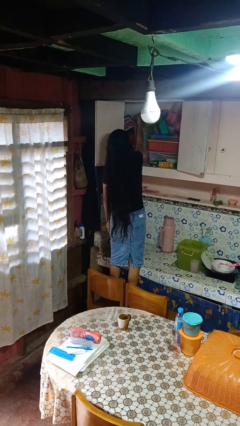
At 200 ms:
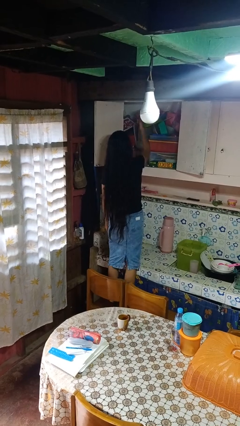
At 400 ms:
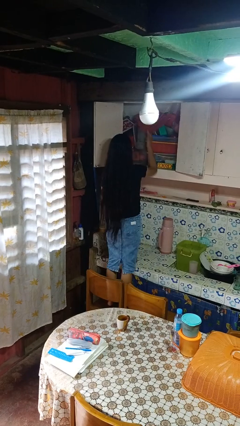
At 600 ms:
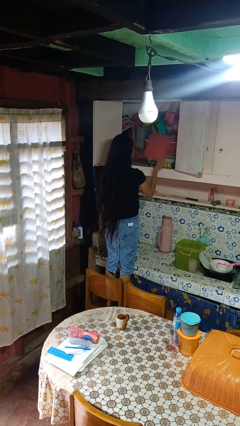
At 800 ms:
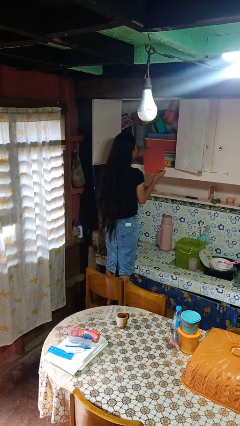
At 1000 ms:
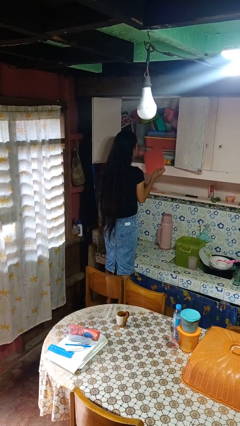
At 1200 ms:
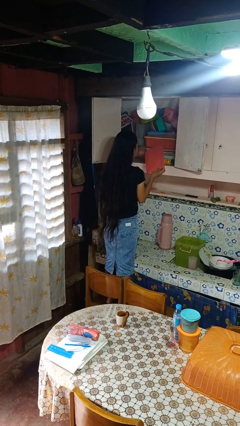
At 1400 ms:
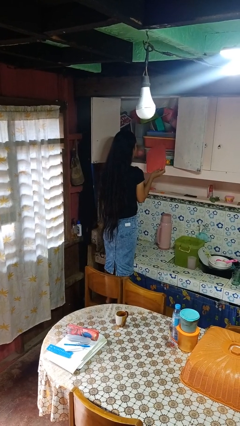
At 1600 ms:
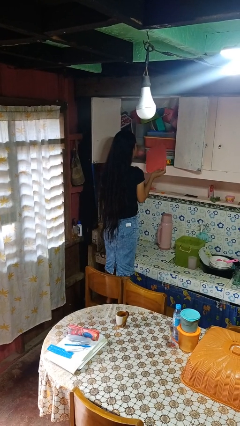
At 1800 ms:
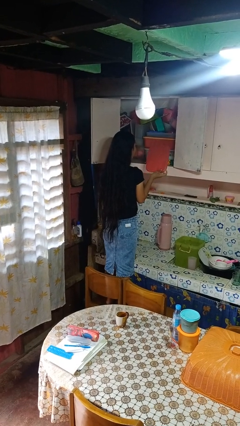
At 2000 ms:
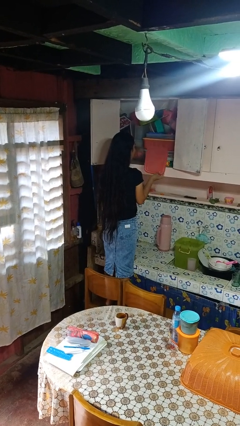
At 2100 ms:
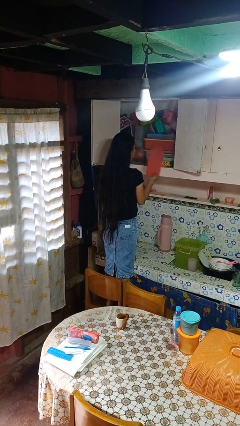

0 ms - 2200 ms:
person takes object from cabinet

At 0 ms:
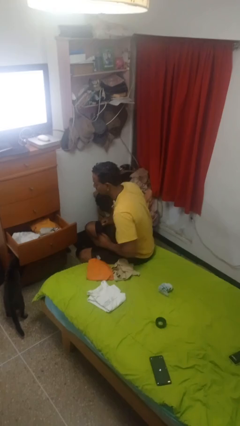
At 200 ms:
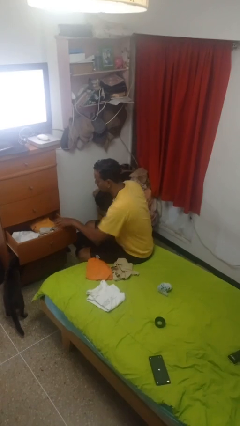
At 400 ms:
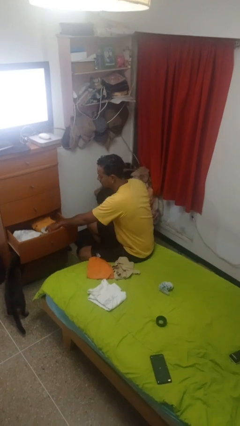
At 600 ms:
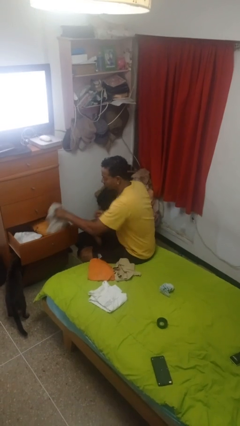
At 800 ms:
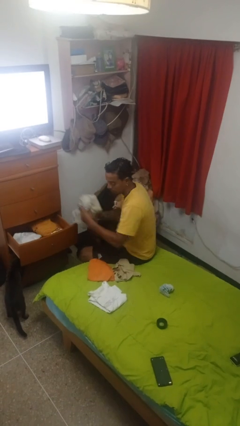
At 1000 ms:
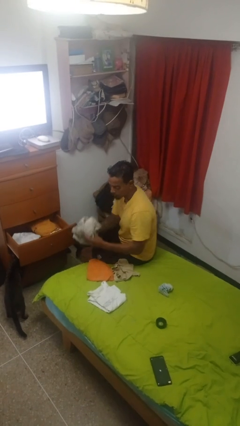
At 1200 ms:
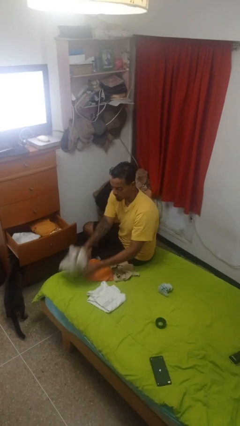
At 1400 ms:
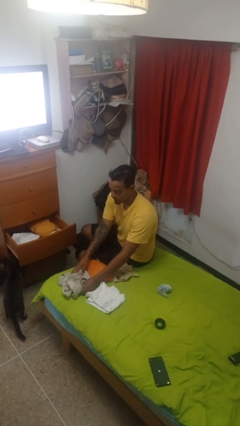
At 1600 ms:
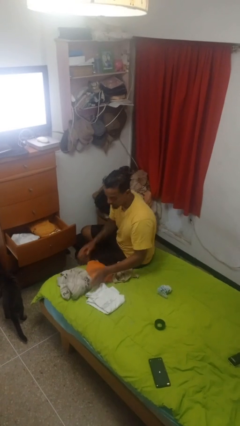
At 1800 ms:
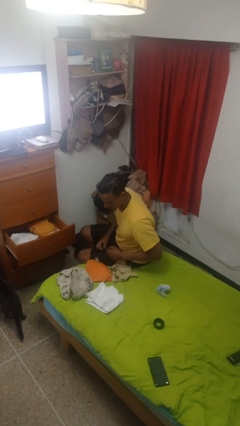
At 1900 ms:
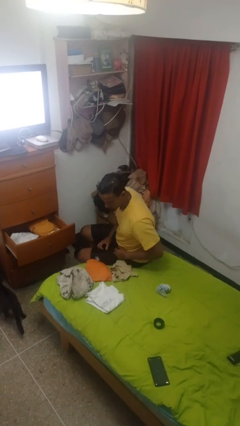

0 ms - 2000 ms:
person takes clothes from dresser

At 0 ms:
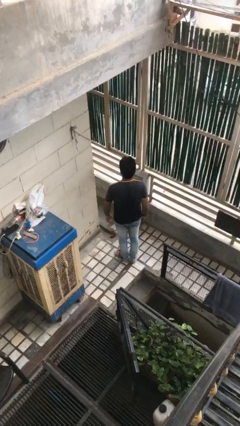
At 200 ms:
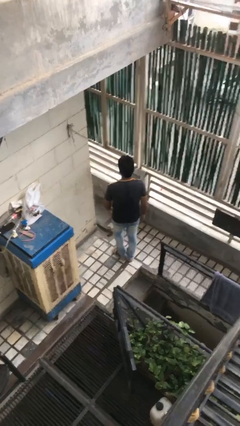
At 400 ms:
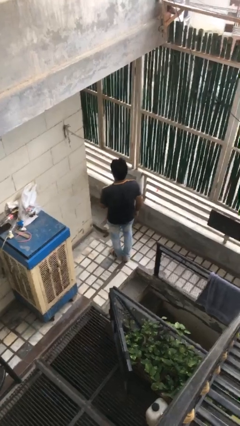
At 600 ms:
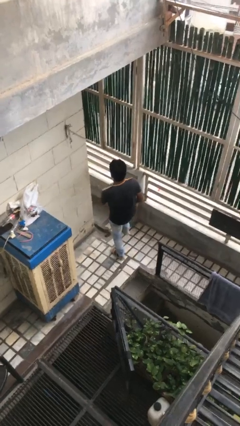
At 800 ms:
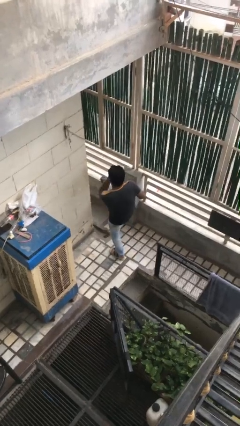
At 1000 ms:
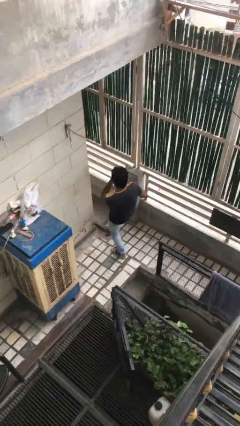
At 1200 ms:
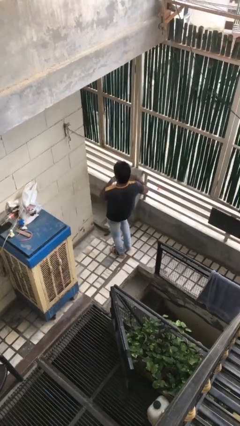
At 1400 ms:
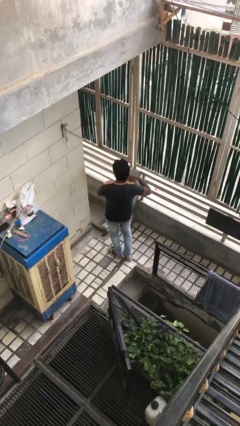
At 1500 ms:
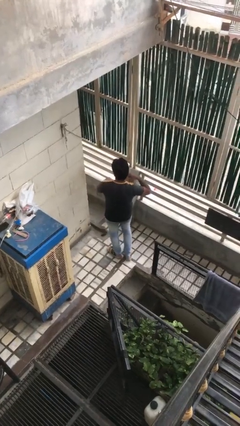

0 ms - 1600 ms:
person karate kicks

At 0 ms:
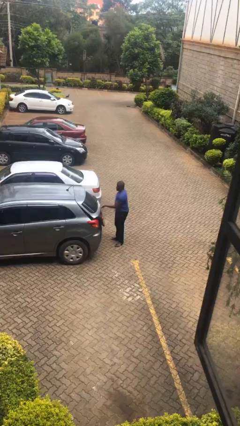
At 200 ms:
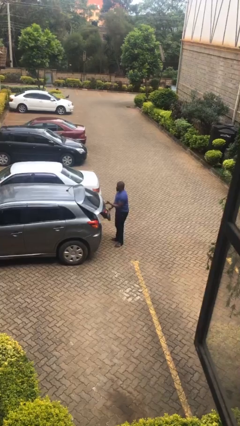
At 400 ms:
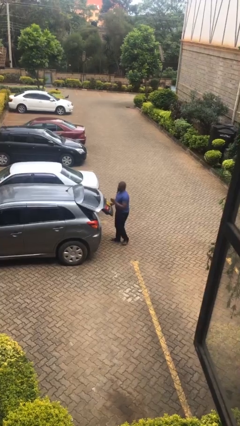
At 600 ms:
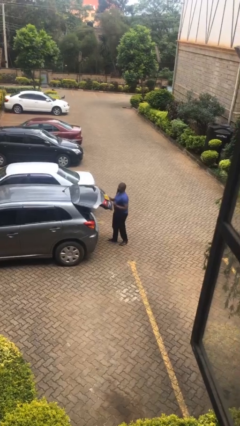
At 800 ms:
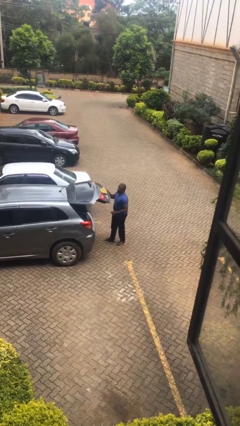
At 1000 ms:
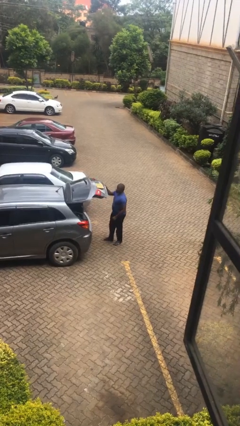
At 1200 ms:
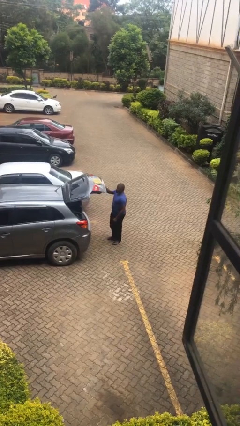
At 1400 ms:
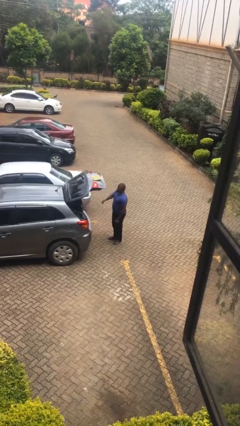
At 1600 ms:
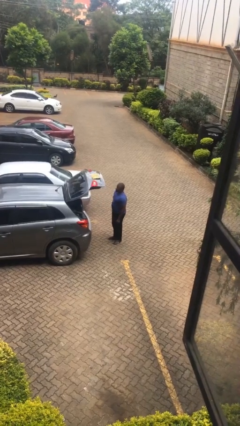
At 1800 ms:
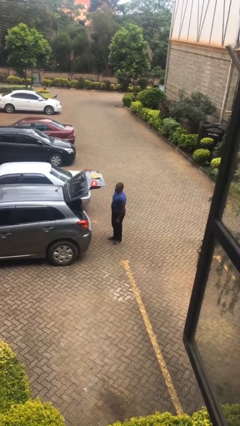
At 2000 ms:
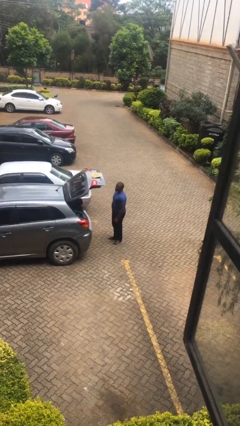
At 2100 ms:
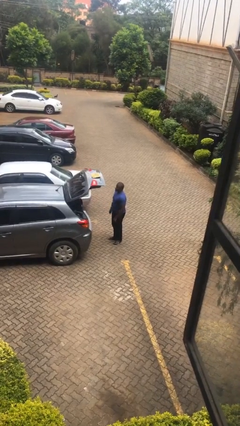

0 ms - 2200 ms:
person opens car trunk

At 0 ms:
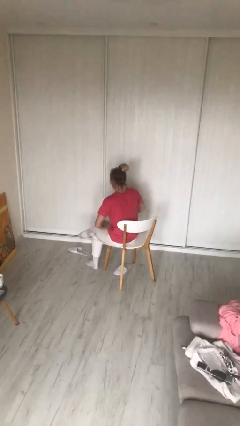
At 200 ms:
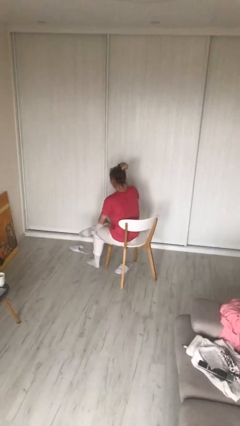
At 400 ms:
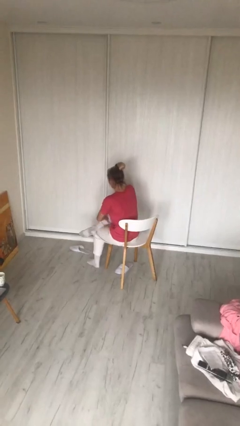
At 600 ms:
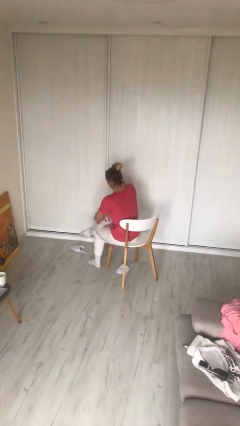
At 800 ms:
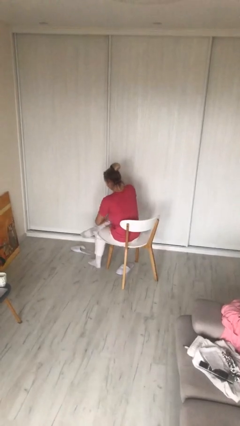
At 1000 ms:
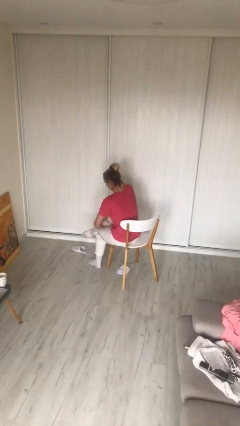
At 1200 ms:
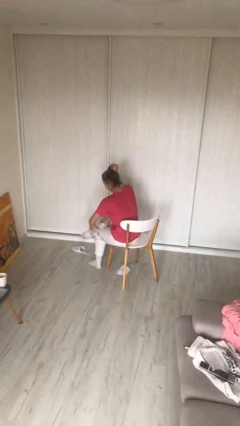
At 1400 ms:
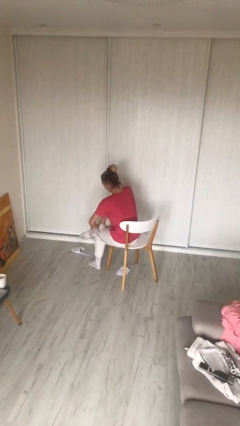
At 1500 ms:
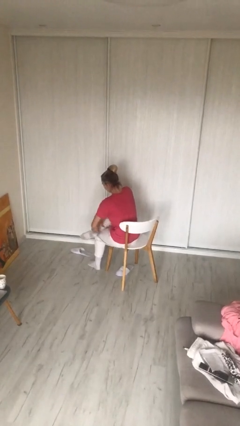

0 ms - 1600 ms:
person rubs foot

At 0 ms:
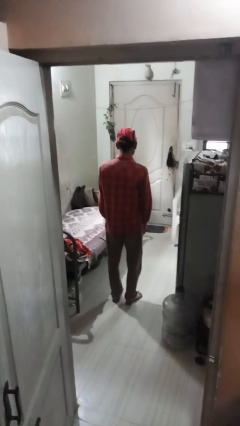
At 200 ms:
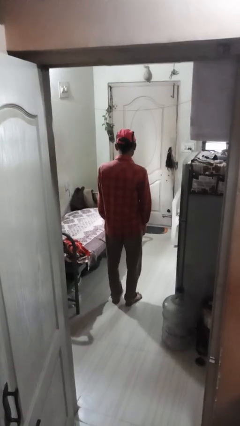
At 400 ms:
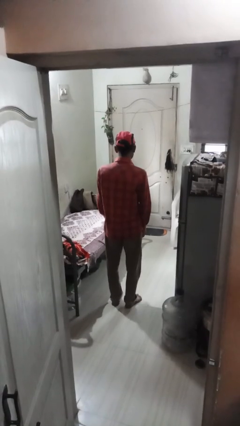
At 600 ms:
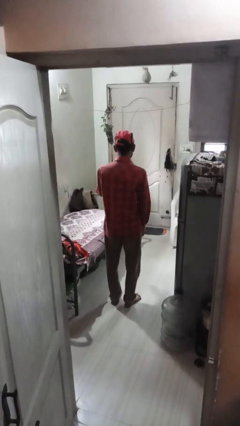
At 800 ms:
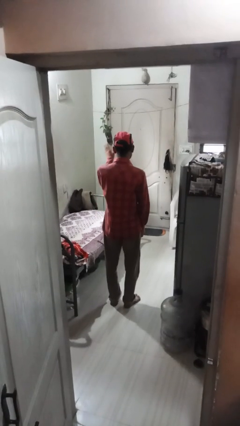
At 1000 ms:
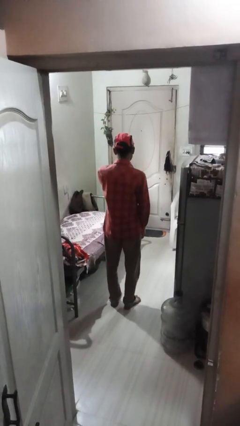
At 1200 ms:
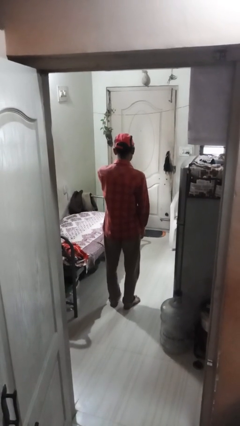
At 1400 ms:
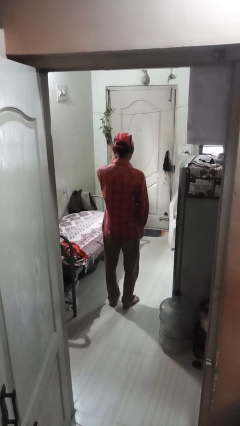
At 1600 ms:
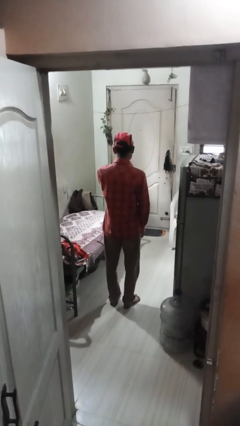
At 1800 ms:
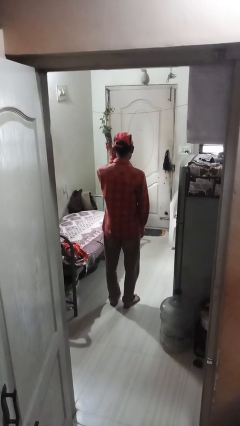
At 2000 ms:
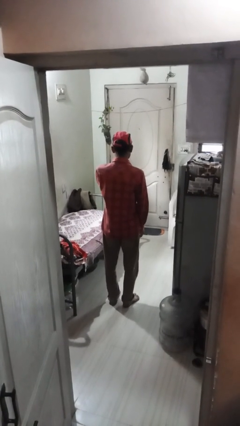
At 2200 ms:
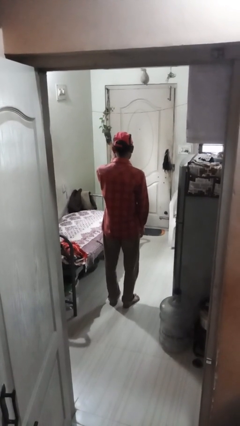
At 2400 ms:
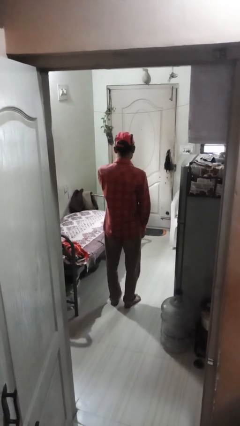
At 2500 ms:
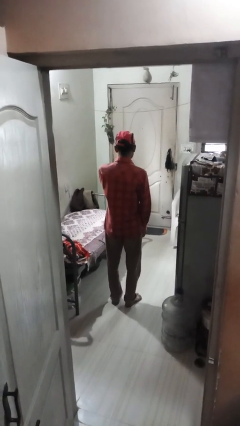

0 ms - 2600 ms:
person waves at person

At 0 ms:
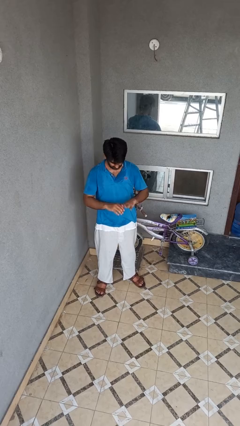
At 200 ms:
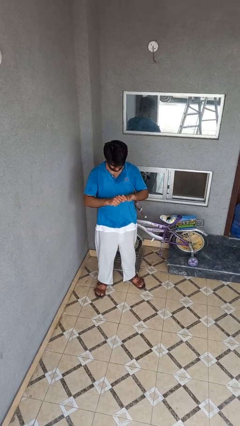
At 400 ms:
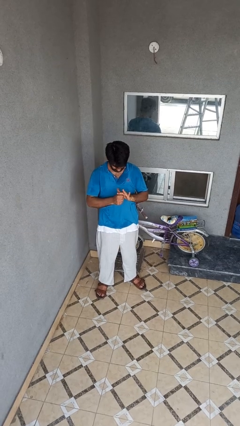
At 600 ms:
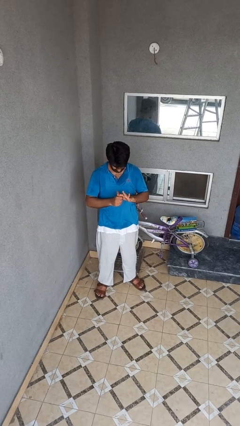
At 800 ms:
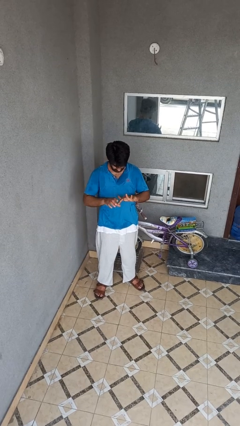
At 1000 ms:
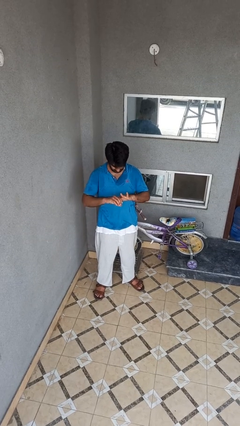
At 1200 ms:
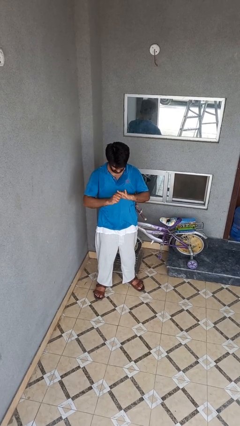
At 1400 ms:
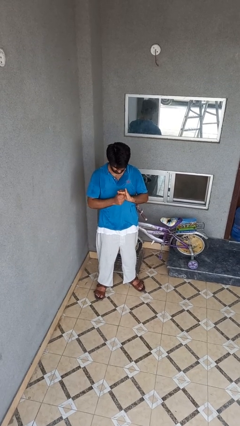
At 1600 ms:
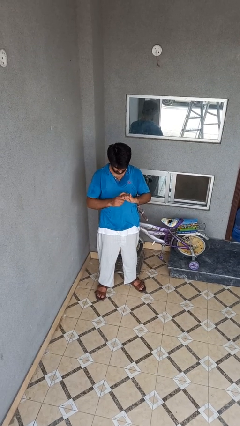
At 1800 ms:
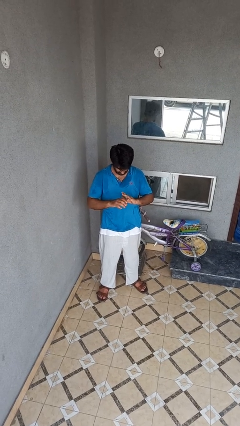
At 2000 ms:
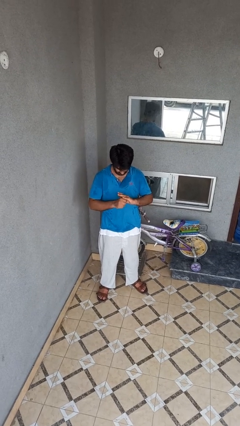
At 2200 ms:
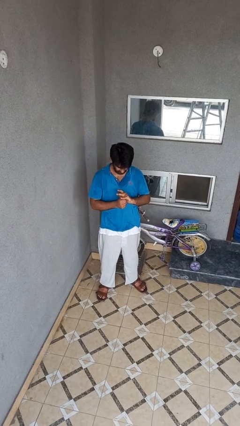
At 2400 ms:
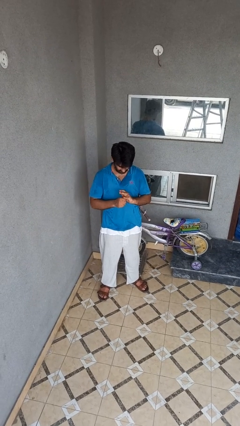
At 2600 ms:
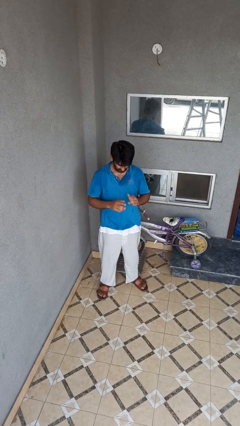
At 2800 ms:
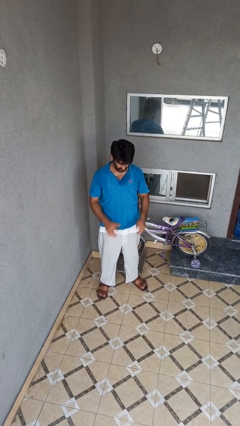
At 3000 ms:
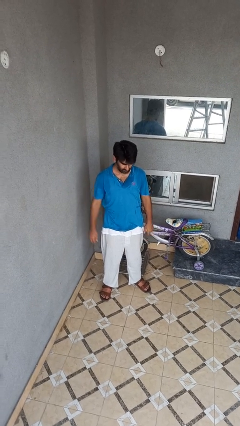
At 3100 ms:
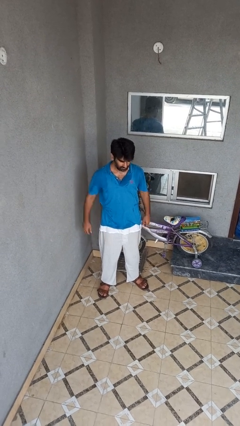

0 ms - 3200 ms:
person cracks knuckles

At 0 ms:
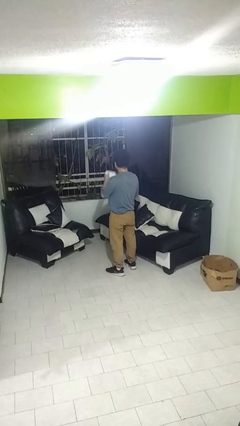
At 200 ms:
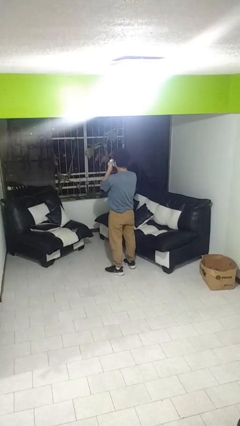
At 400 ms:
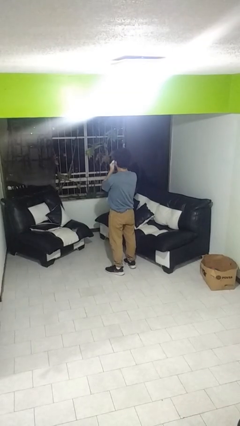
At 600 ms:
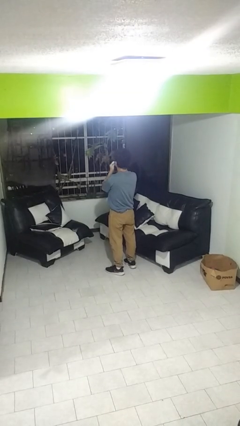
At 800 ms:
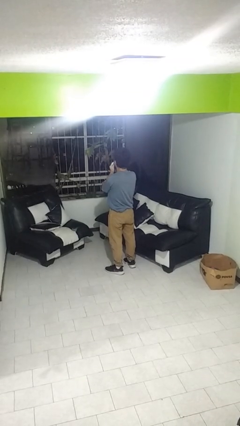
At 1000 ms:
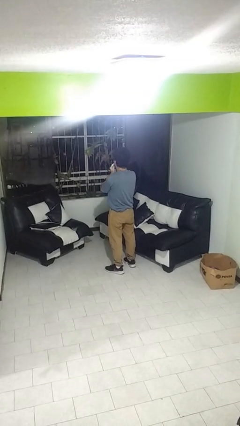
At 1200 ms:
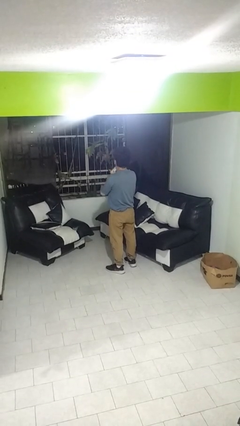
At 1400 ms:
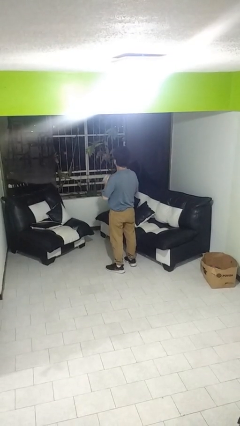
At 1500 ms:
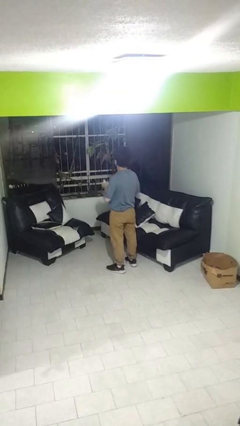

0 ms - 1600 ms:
person wipes mouth with napkin
